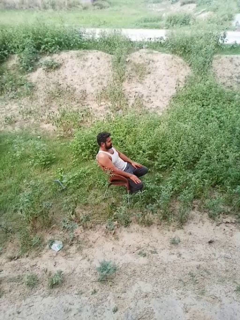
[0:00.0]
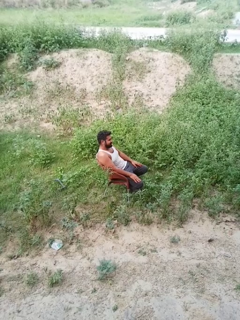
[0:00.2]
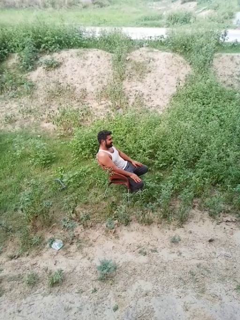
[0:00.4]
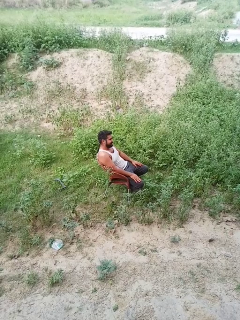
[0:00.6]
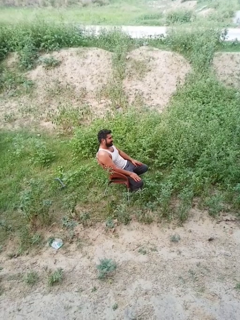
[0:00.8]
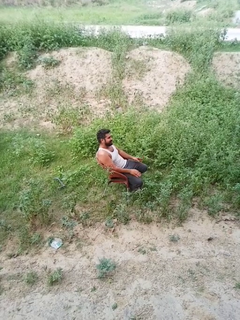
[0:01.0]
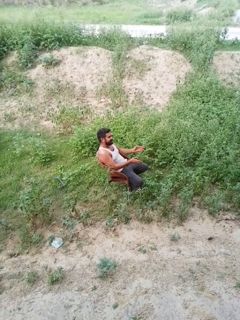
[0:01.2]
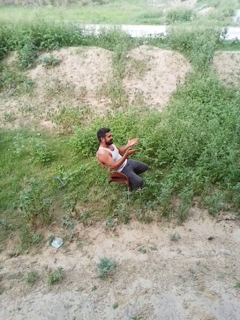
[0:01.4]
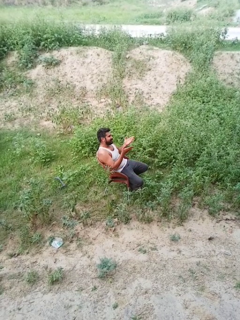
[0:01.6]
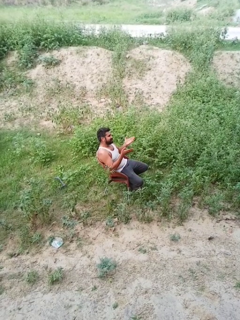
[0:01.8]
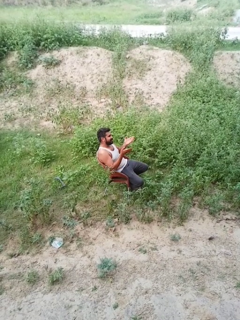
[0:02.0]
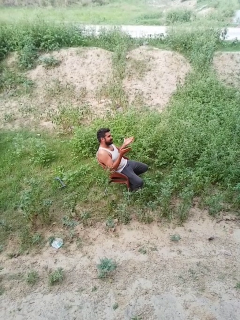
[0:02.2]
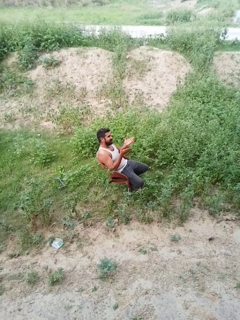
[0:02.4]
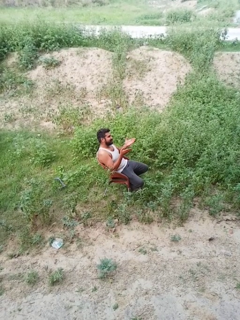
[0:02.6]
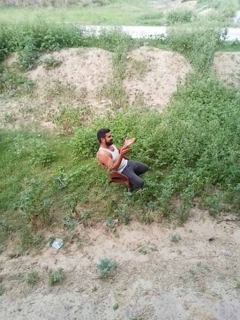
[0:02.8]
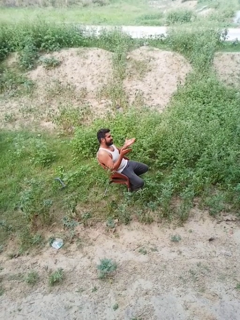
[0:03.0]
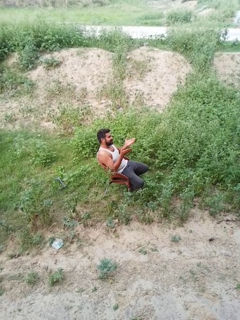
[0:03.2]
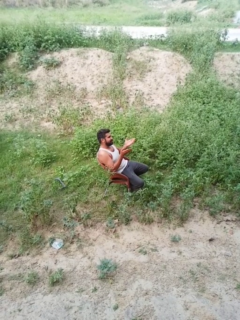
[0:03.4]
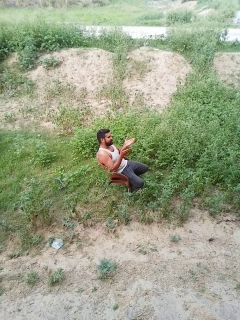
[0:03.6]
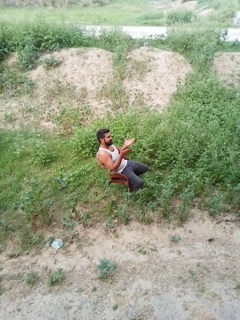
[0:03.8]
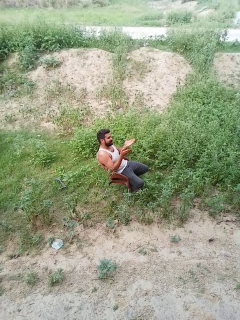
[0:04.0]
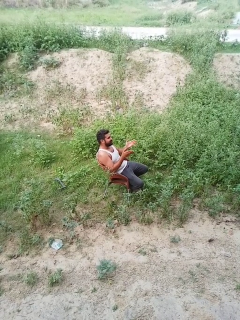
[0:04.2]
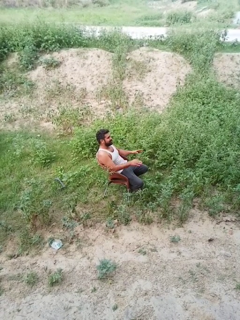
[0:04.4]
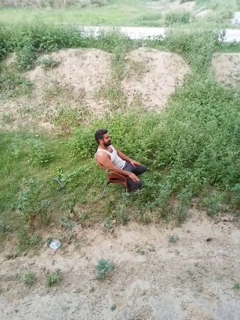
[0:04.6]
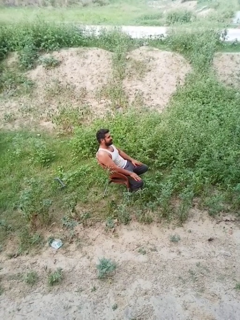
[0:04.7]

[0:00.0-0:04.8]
person prays

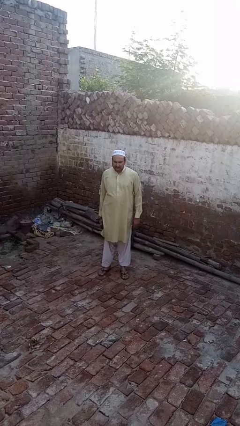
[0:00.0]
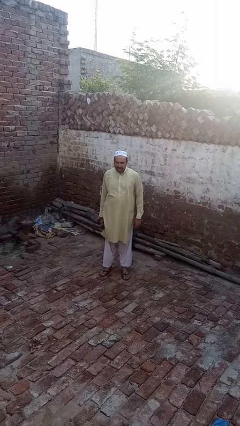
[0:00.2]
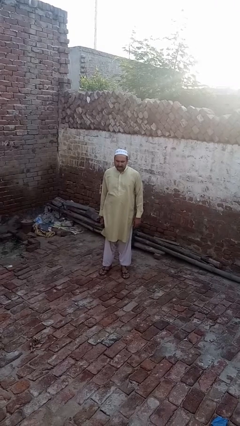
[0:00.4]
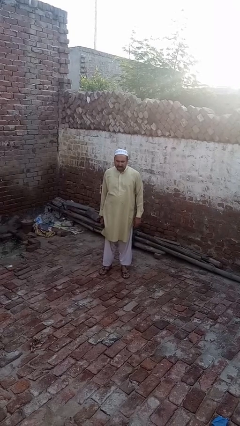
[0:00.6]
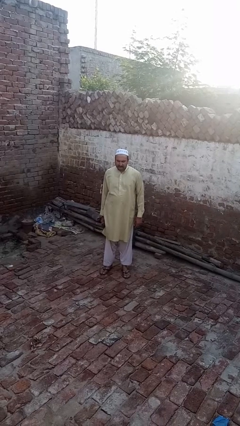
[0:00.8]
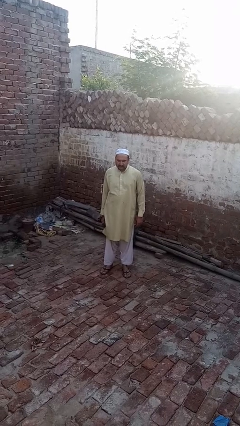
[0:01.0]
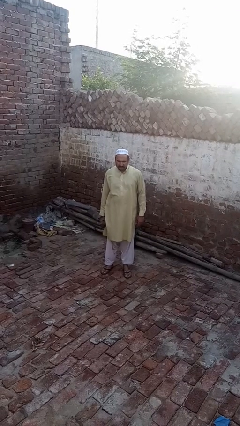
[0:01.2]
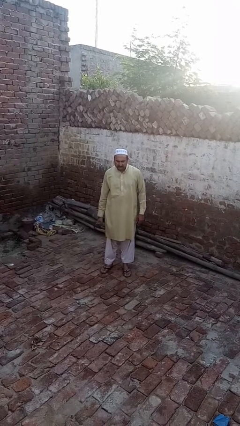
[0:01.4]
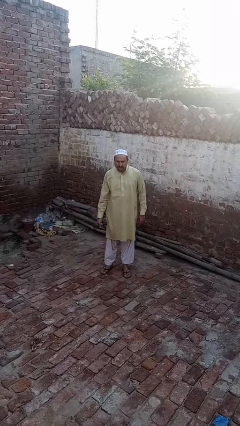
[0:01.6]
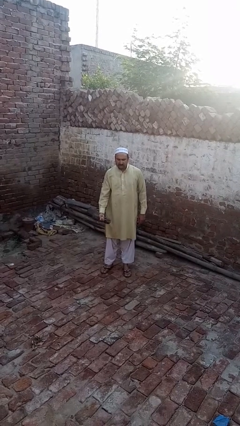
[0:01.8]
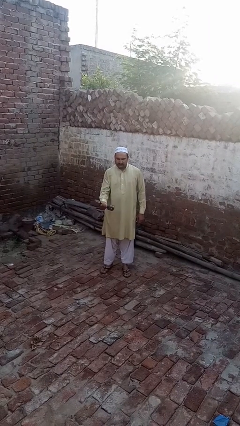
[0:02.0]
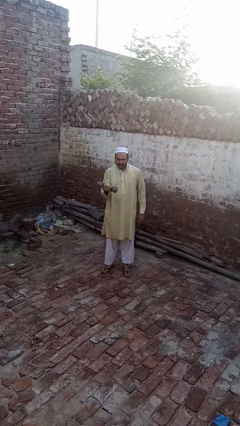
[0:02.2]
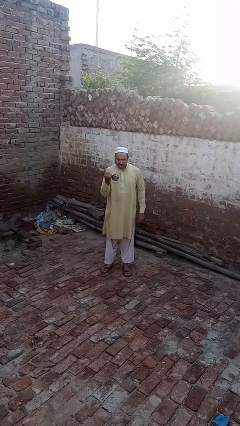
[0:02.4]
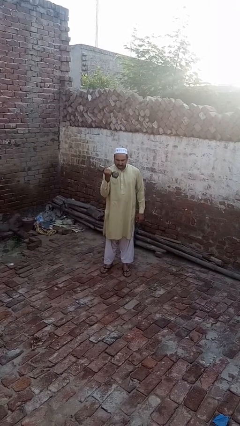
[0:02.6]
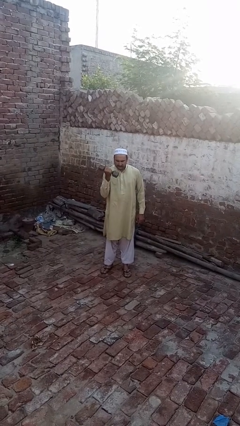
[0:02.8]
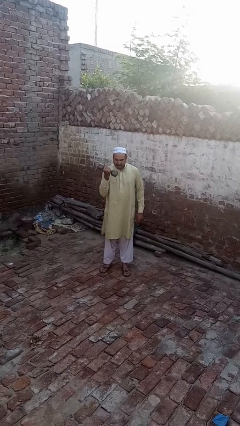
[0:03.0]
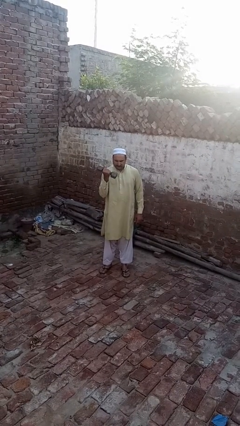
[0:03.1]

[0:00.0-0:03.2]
person lifts dumbbells

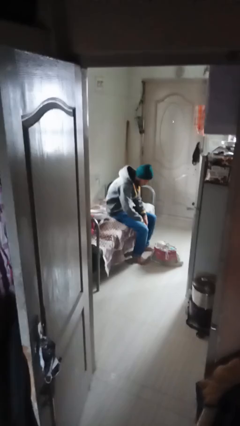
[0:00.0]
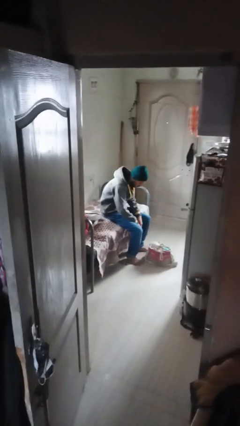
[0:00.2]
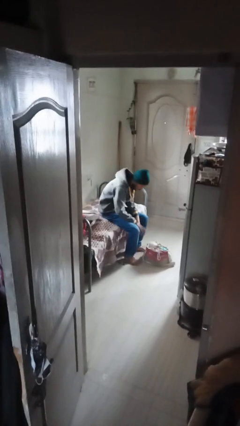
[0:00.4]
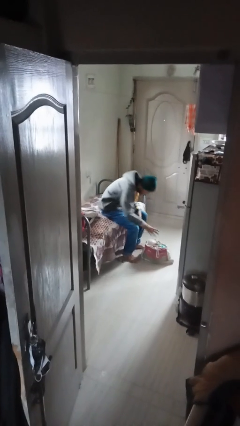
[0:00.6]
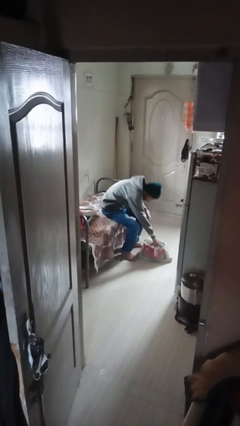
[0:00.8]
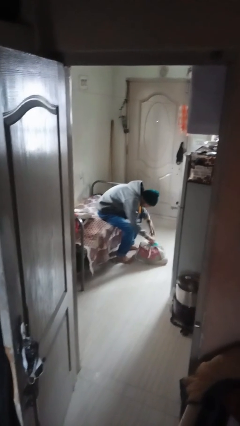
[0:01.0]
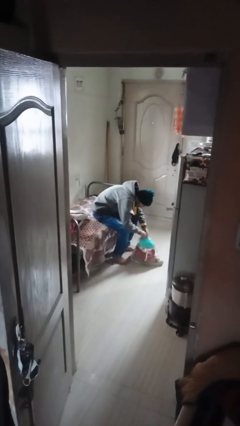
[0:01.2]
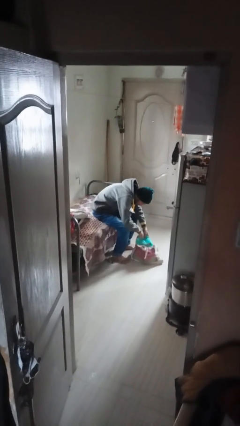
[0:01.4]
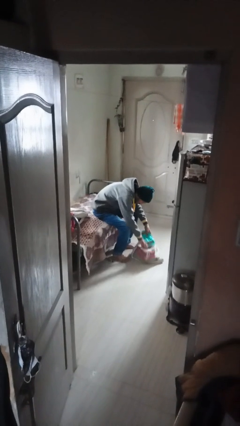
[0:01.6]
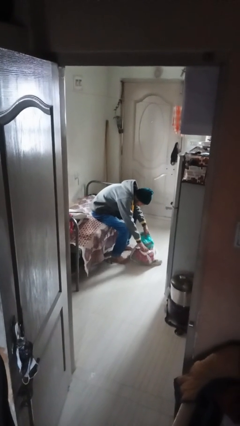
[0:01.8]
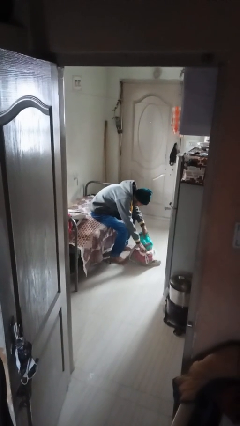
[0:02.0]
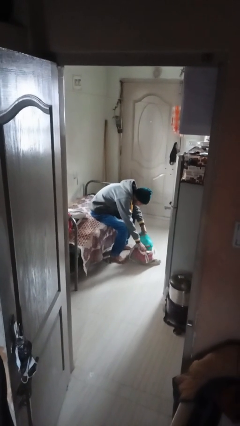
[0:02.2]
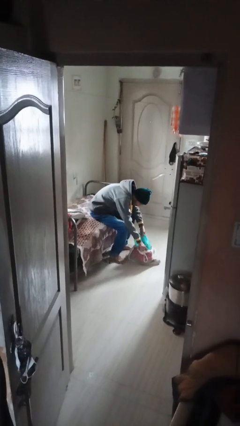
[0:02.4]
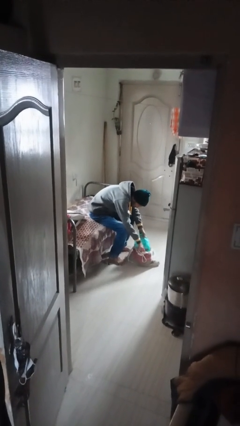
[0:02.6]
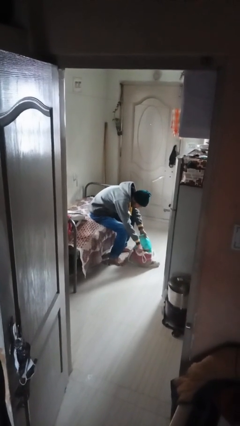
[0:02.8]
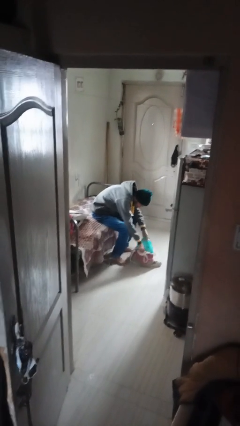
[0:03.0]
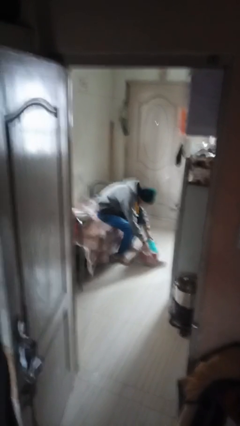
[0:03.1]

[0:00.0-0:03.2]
person searches in bag

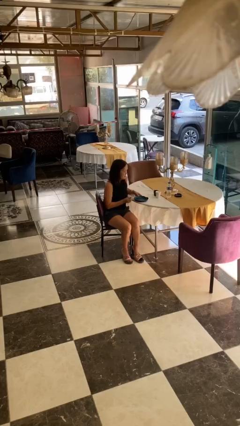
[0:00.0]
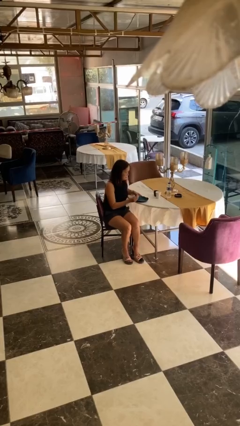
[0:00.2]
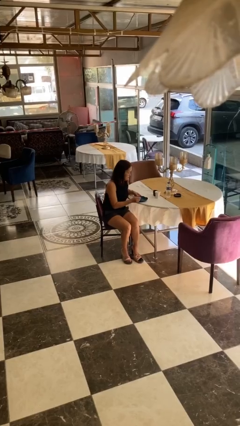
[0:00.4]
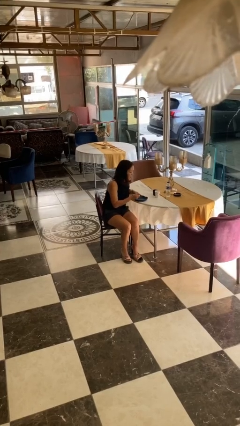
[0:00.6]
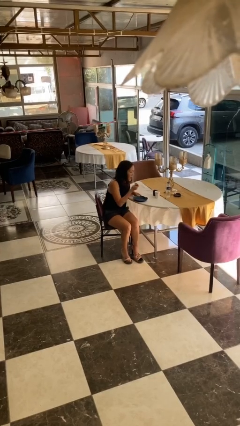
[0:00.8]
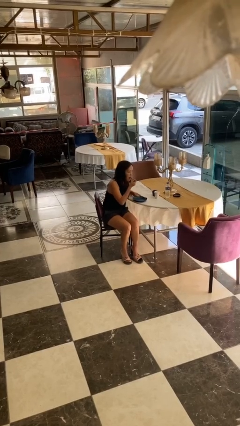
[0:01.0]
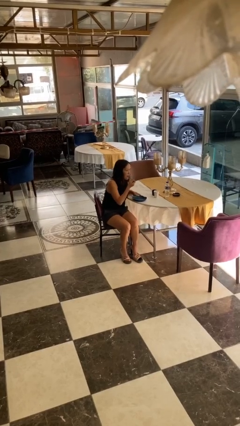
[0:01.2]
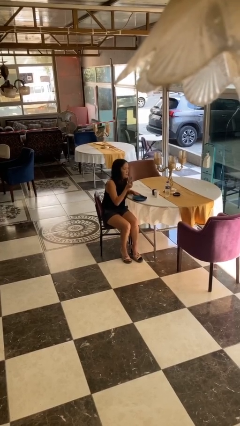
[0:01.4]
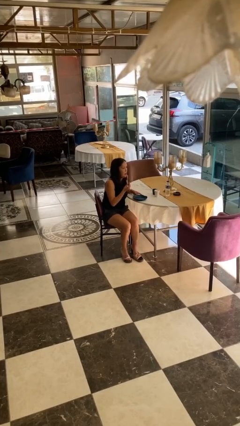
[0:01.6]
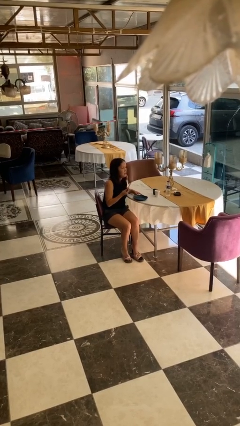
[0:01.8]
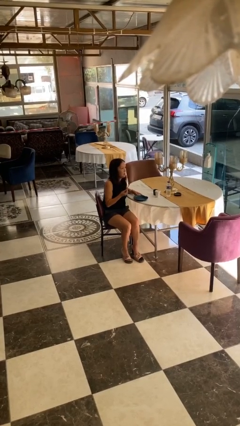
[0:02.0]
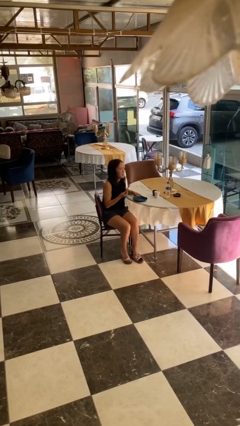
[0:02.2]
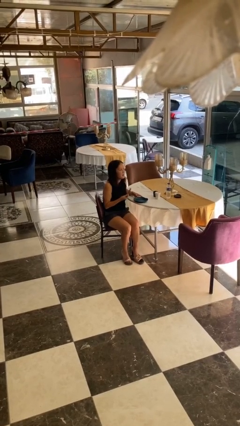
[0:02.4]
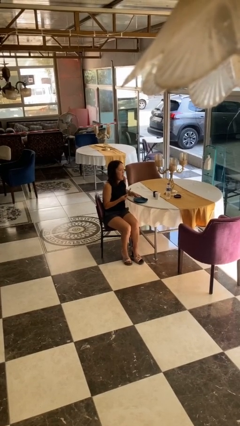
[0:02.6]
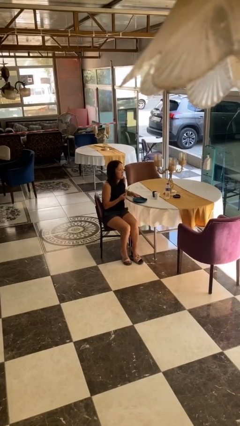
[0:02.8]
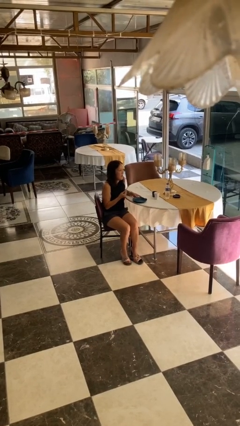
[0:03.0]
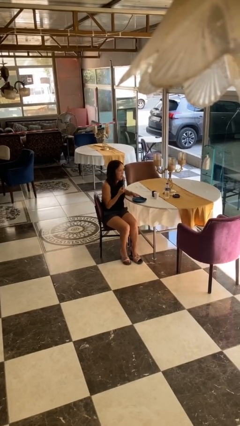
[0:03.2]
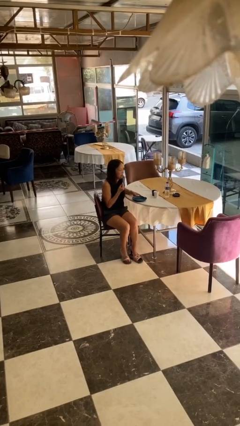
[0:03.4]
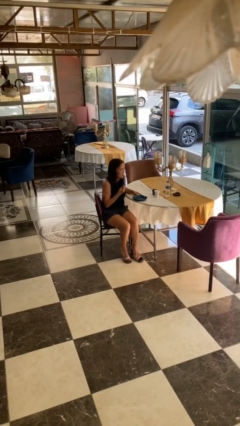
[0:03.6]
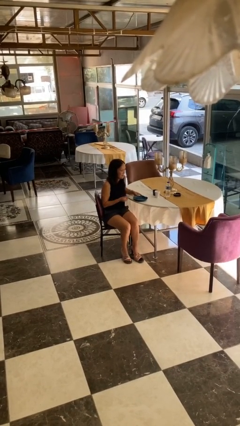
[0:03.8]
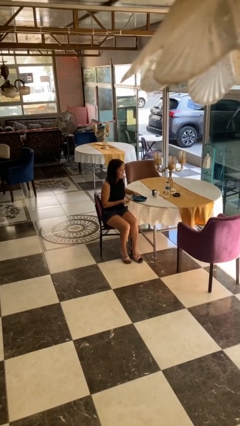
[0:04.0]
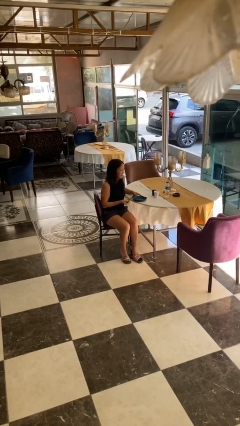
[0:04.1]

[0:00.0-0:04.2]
person eats with utensil

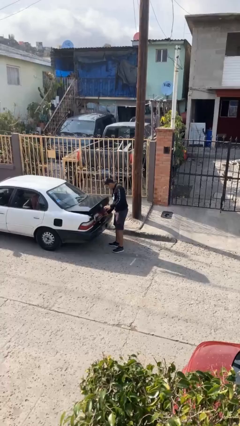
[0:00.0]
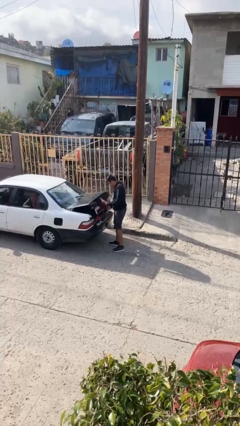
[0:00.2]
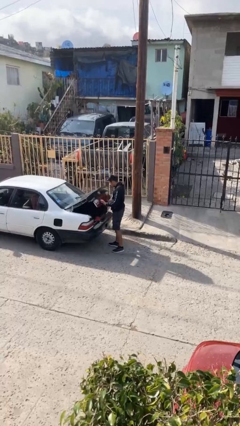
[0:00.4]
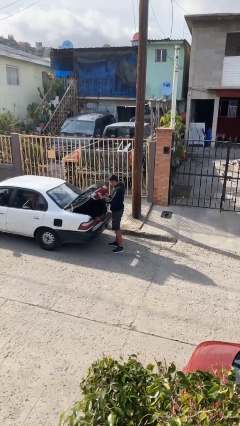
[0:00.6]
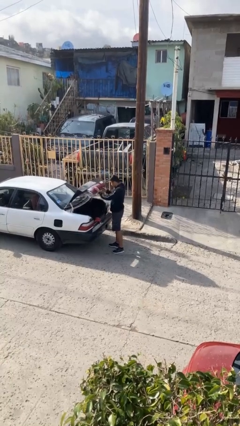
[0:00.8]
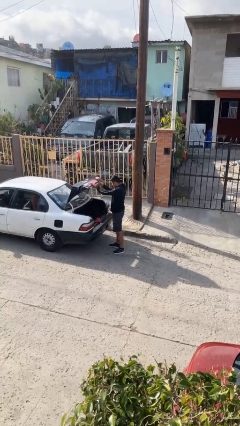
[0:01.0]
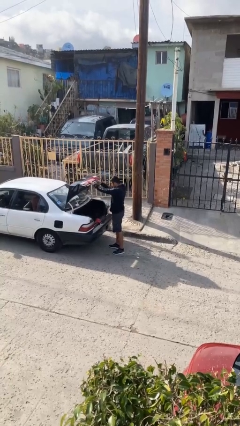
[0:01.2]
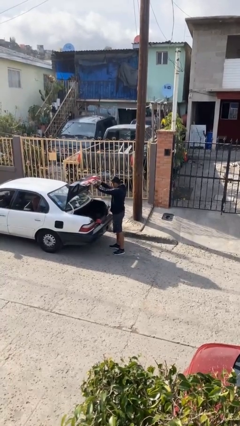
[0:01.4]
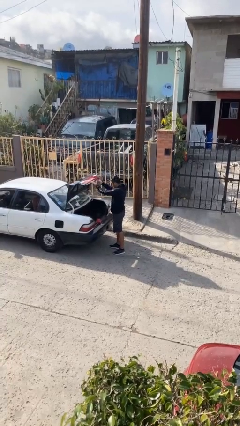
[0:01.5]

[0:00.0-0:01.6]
person opens car trunk

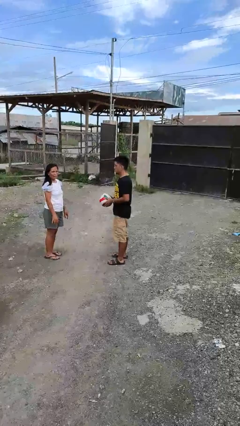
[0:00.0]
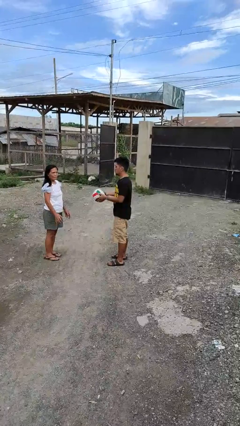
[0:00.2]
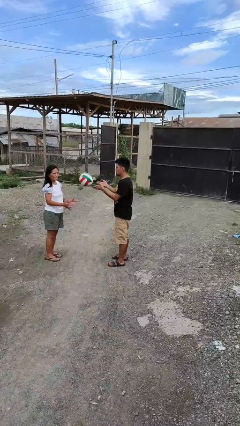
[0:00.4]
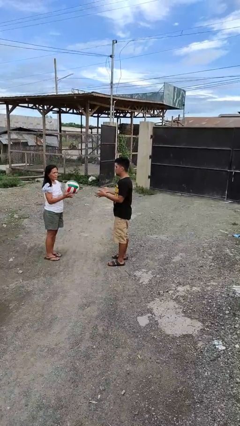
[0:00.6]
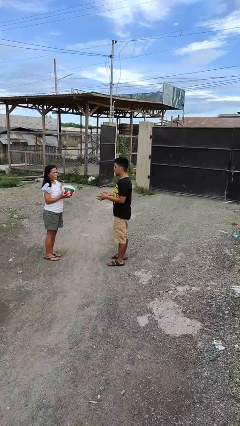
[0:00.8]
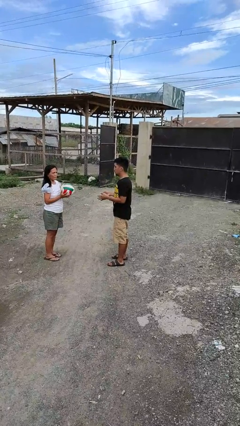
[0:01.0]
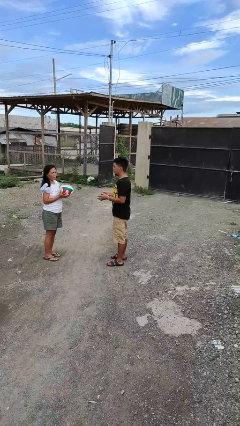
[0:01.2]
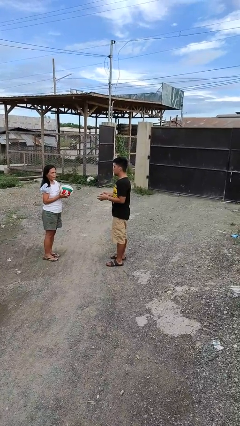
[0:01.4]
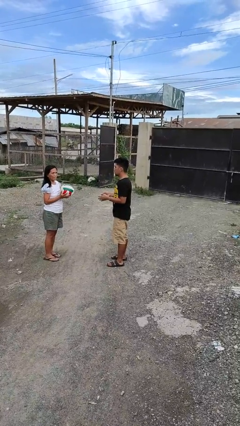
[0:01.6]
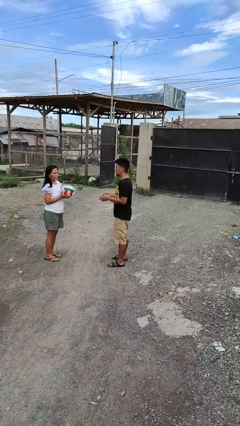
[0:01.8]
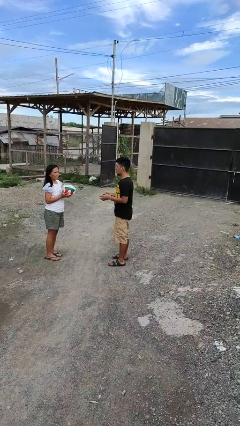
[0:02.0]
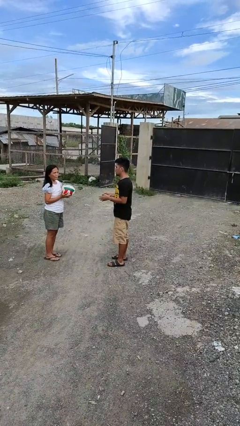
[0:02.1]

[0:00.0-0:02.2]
person throws object to person
